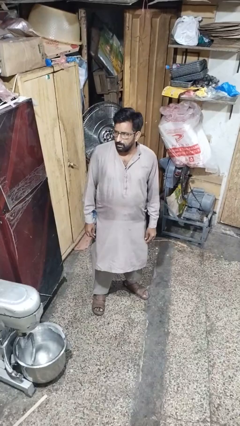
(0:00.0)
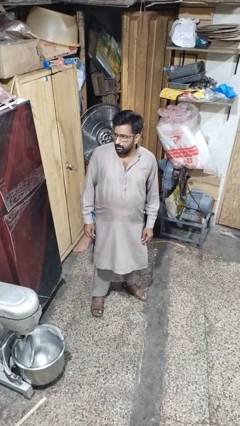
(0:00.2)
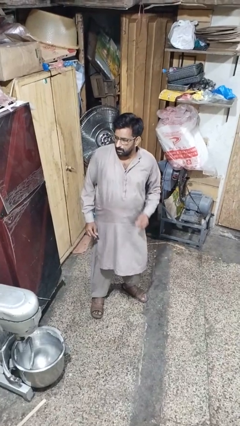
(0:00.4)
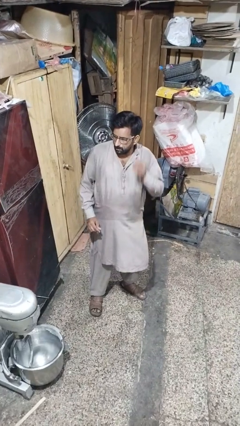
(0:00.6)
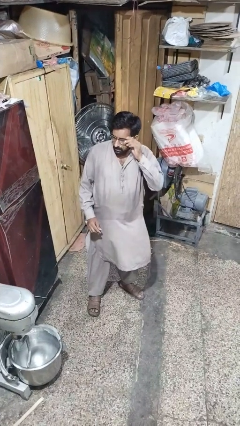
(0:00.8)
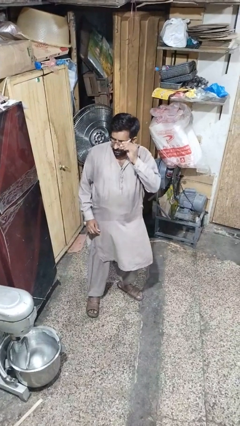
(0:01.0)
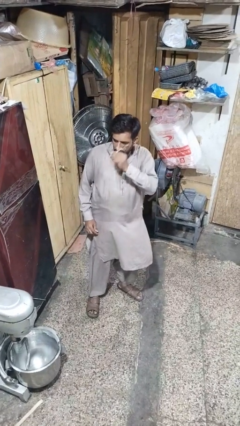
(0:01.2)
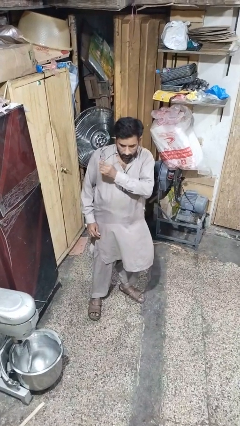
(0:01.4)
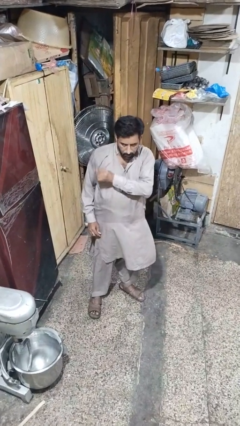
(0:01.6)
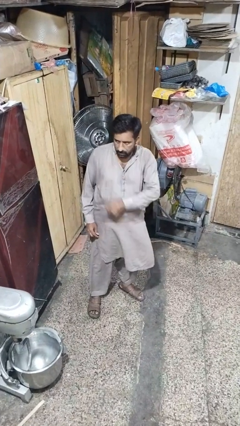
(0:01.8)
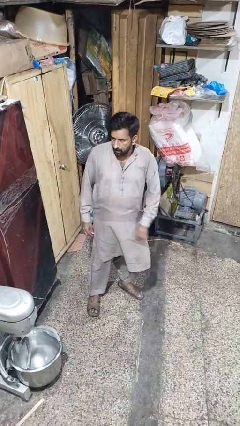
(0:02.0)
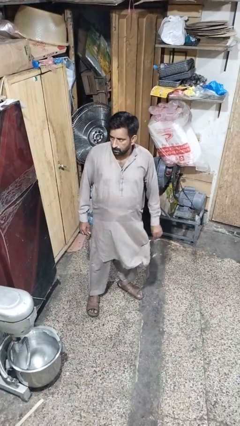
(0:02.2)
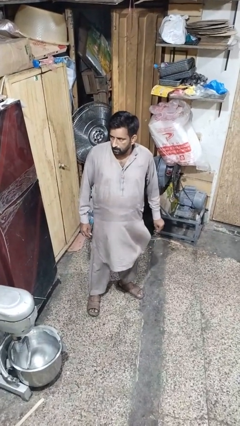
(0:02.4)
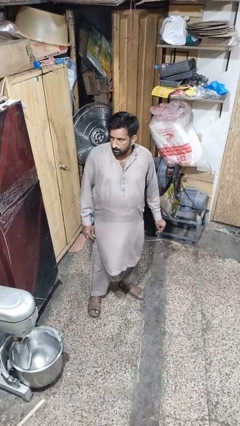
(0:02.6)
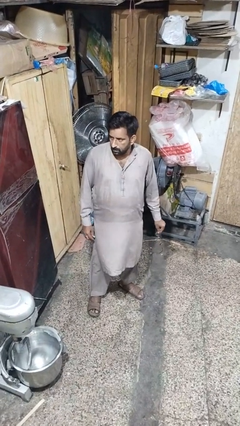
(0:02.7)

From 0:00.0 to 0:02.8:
person takes off glasses

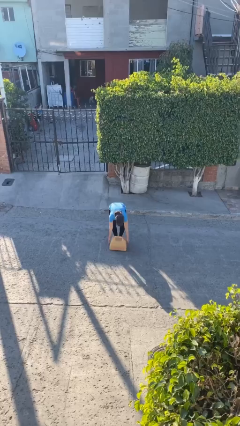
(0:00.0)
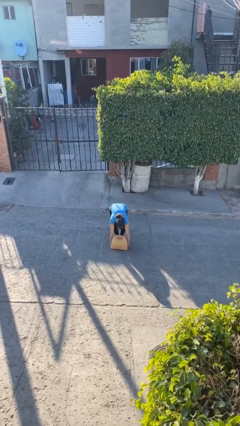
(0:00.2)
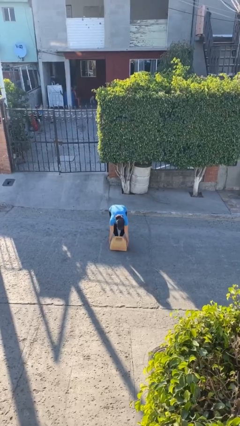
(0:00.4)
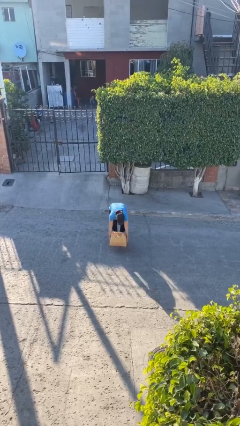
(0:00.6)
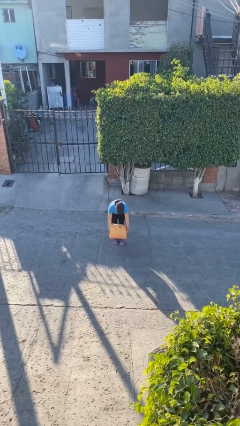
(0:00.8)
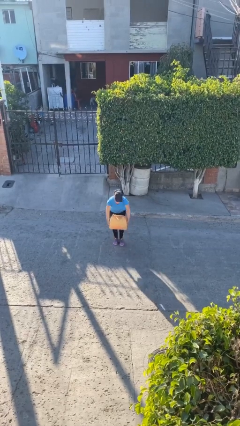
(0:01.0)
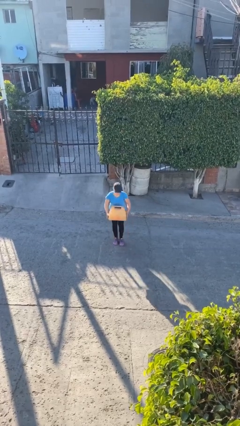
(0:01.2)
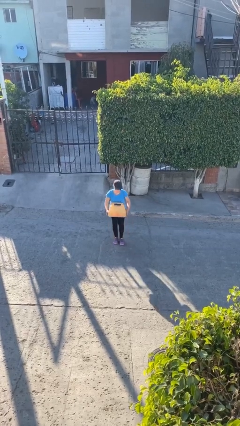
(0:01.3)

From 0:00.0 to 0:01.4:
person picks up object from floor

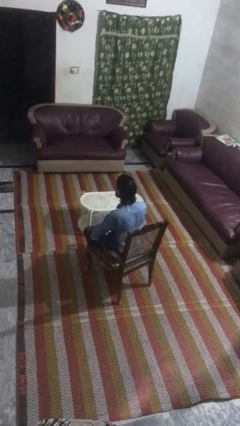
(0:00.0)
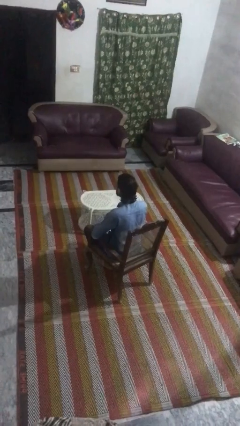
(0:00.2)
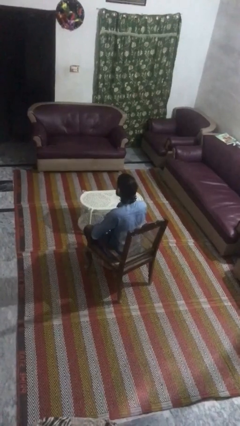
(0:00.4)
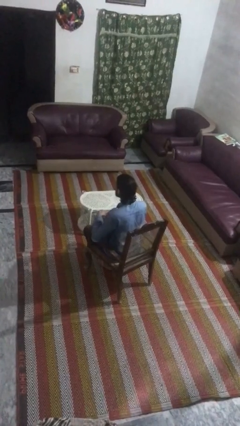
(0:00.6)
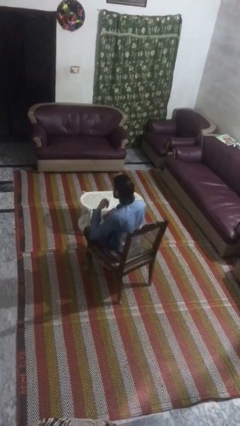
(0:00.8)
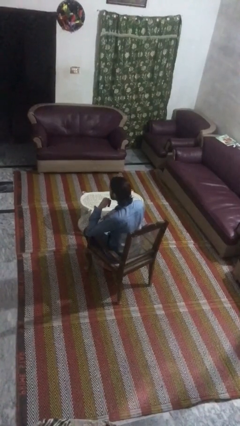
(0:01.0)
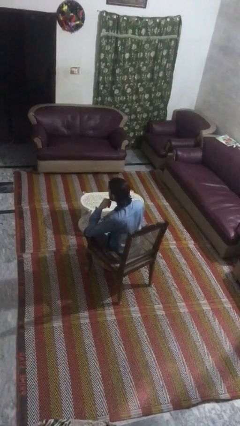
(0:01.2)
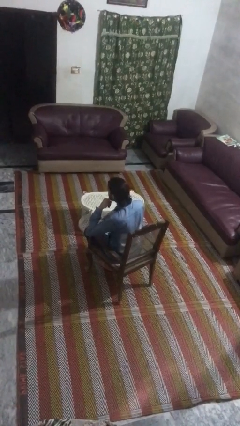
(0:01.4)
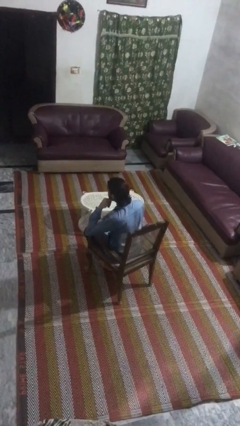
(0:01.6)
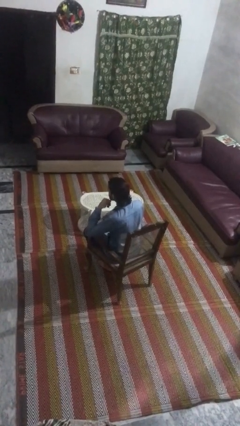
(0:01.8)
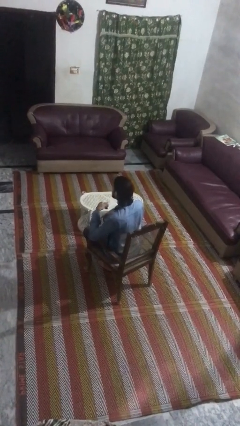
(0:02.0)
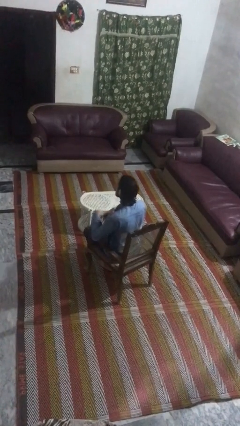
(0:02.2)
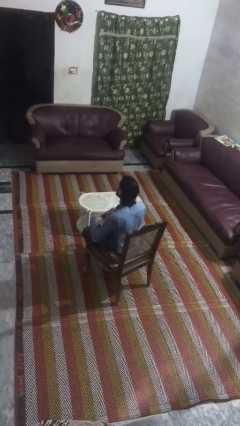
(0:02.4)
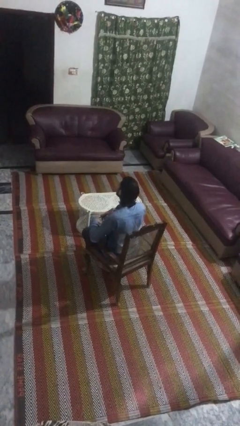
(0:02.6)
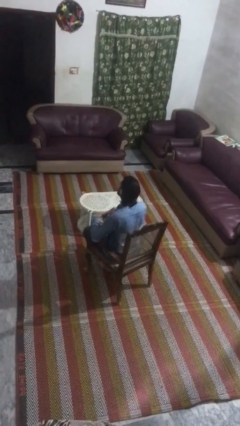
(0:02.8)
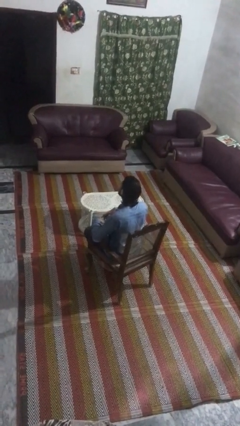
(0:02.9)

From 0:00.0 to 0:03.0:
person gestures call me

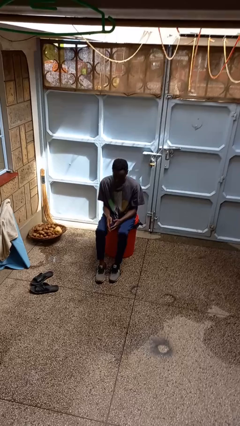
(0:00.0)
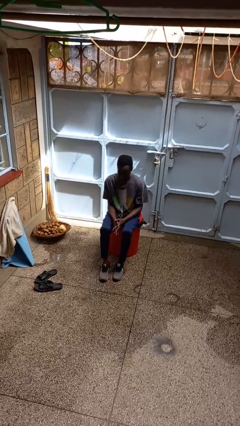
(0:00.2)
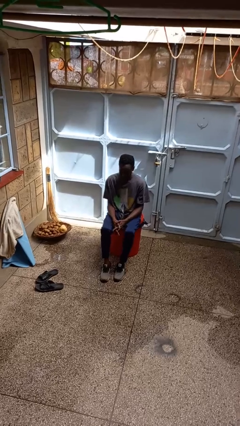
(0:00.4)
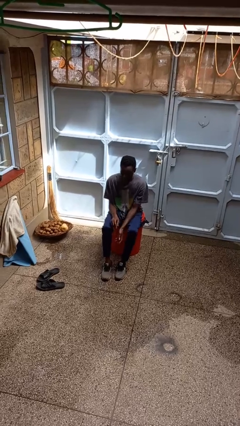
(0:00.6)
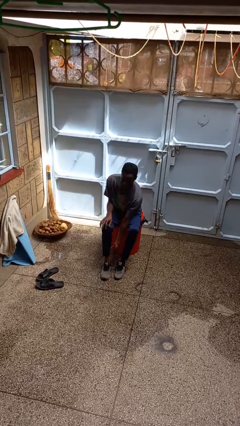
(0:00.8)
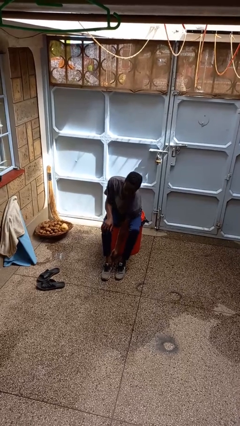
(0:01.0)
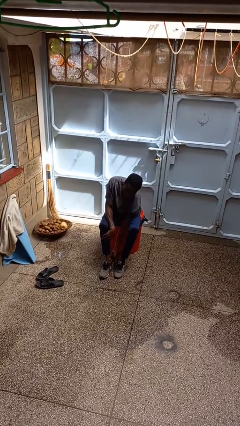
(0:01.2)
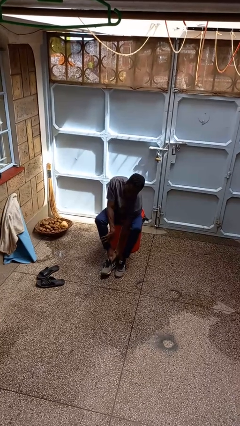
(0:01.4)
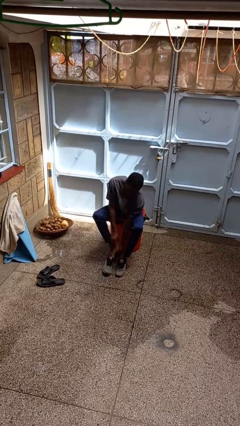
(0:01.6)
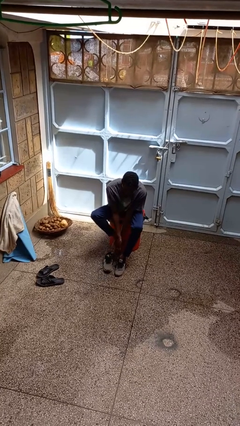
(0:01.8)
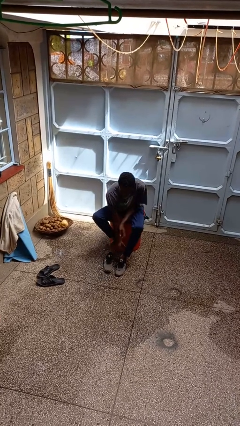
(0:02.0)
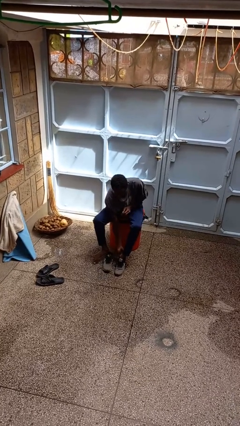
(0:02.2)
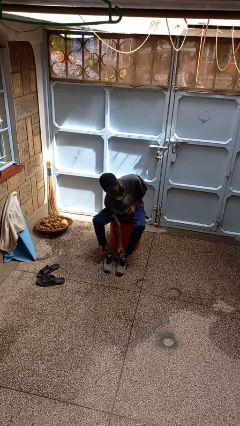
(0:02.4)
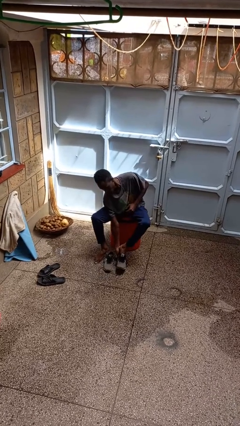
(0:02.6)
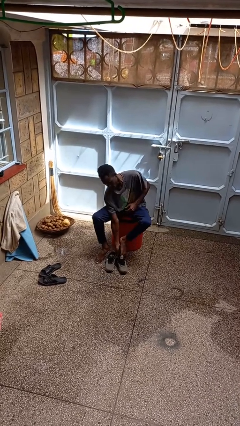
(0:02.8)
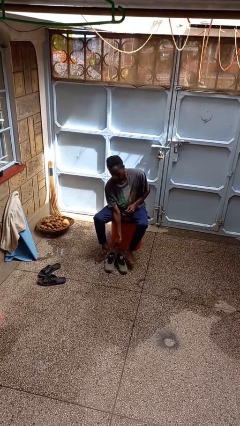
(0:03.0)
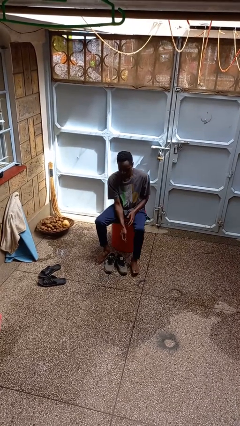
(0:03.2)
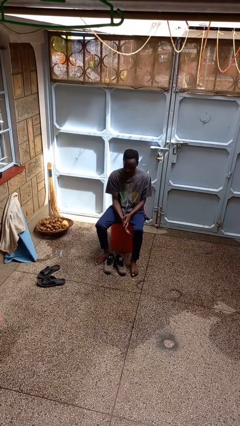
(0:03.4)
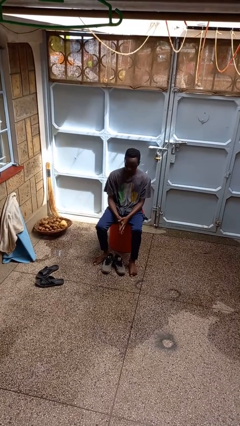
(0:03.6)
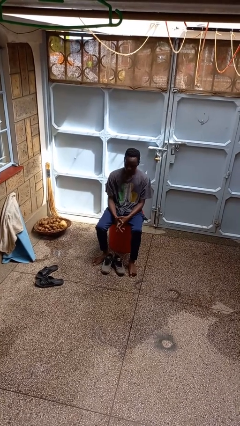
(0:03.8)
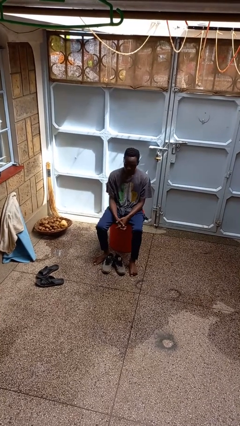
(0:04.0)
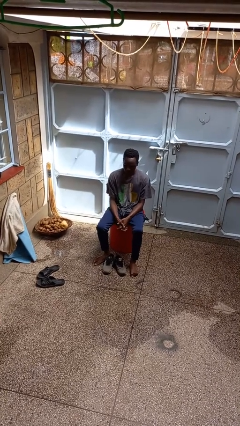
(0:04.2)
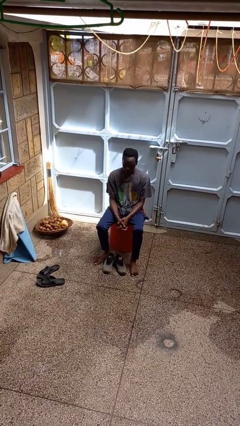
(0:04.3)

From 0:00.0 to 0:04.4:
person takes off shoes

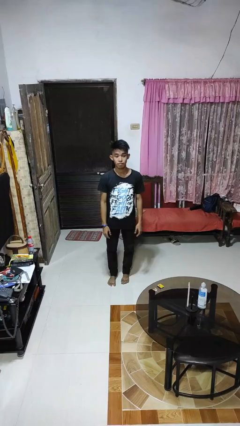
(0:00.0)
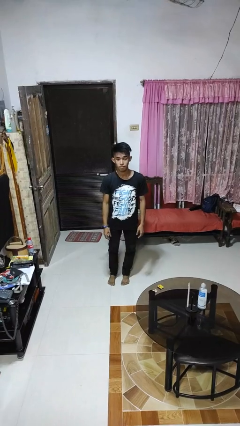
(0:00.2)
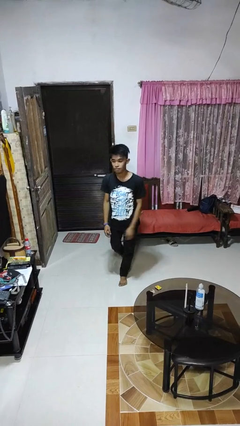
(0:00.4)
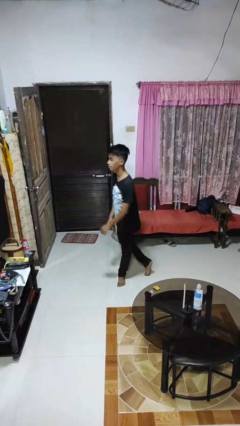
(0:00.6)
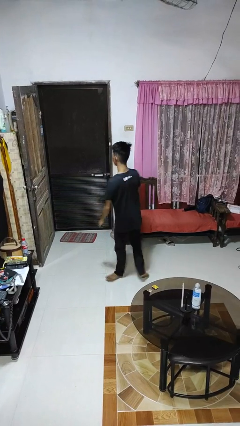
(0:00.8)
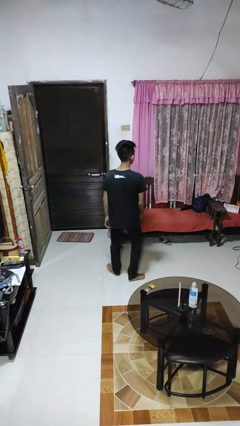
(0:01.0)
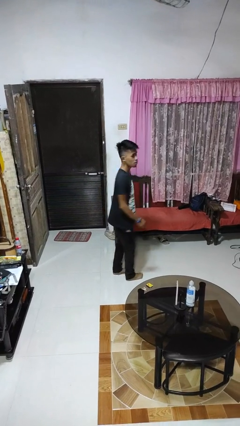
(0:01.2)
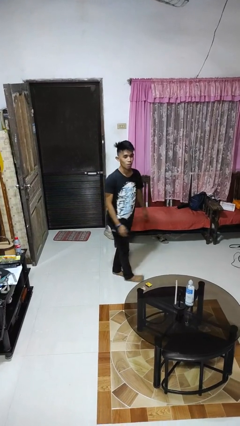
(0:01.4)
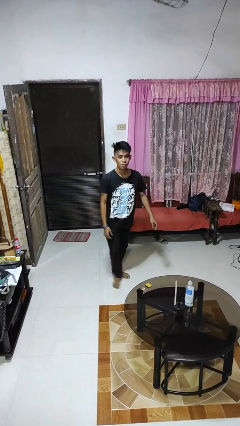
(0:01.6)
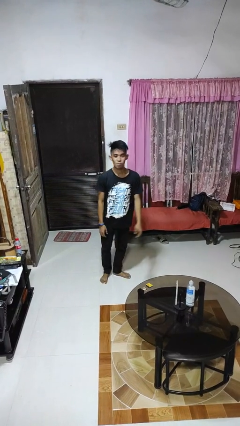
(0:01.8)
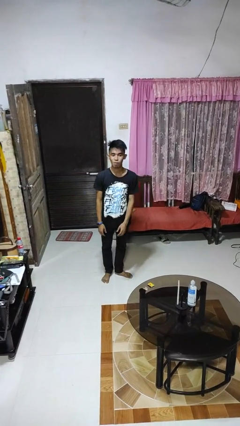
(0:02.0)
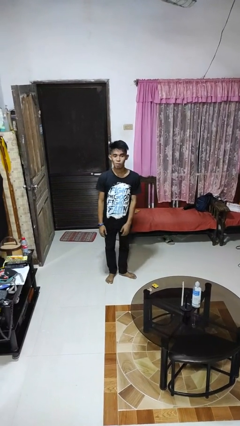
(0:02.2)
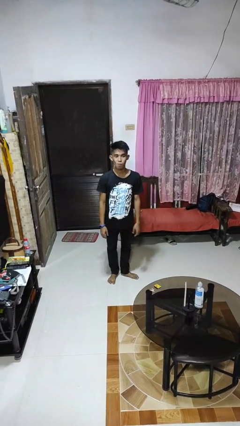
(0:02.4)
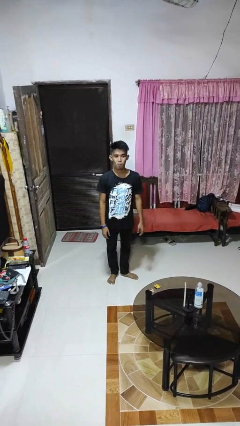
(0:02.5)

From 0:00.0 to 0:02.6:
person twirls

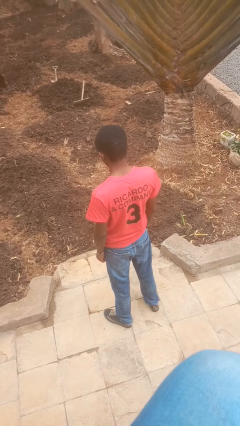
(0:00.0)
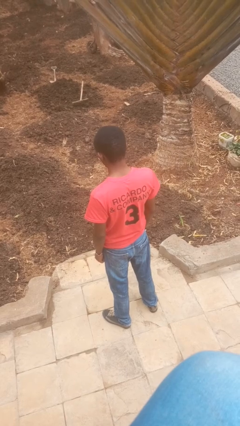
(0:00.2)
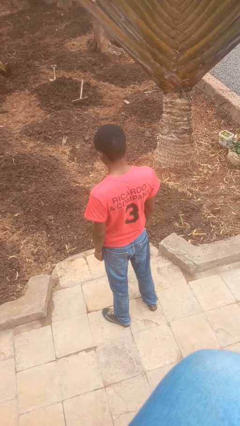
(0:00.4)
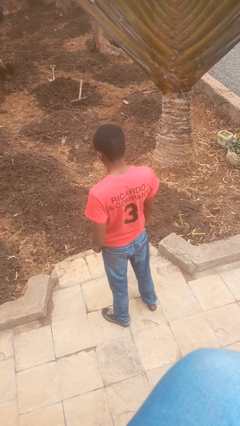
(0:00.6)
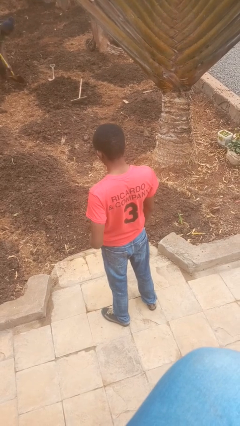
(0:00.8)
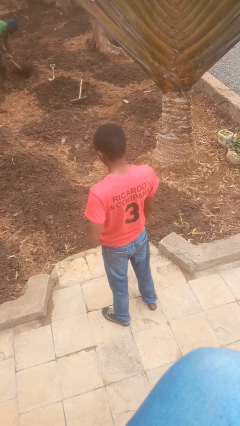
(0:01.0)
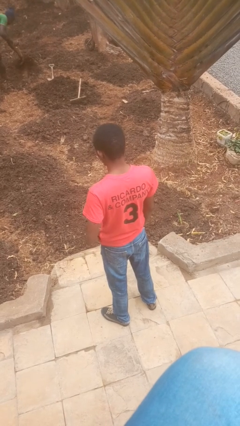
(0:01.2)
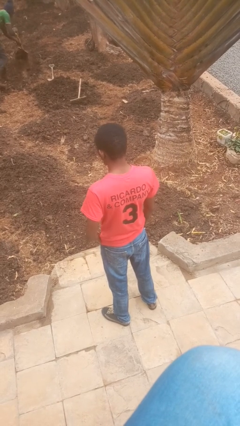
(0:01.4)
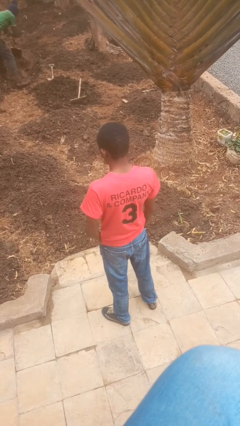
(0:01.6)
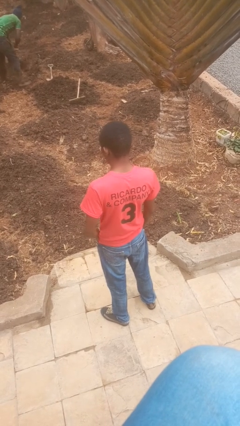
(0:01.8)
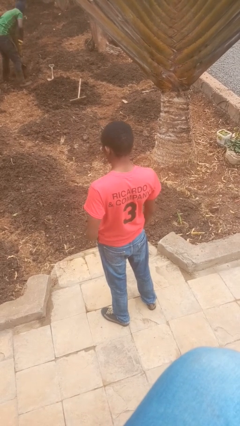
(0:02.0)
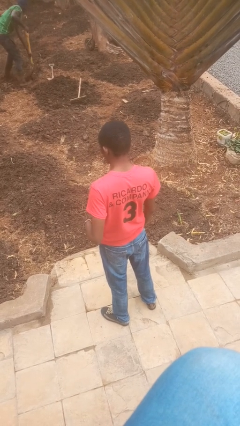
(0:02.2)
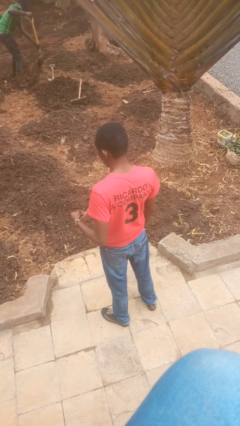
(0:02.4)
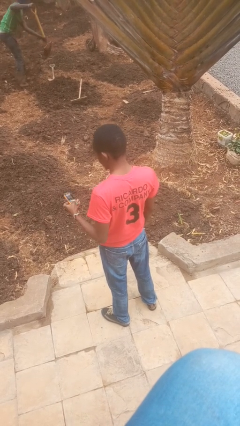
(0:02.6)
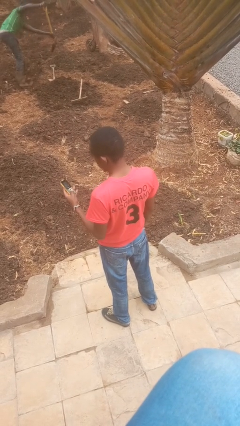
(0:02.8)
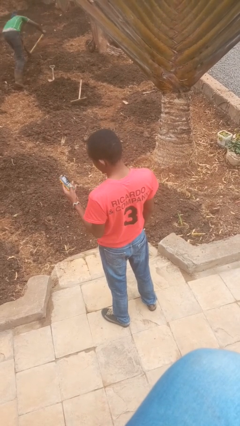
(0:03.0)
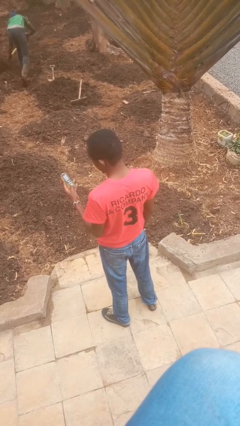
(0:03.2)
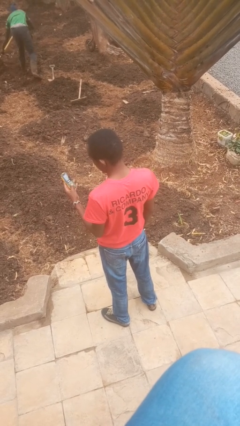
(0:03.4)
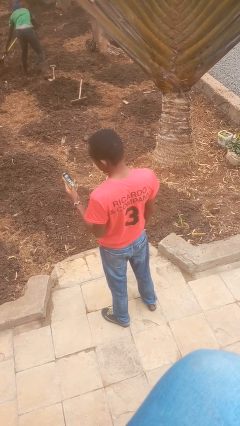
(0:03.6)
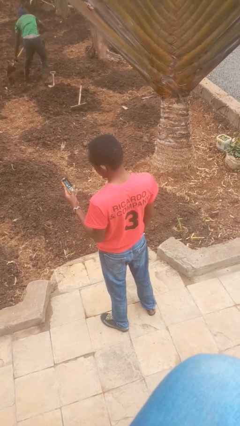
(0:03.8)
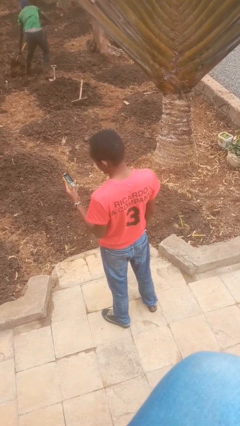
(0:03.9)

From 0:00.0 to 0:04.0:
person takes phone from pocket
